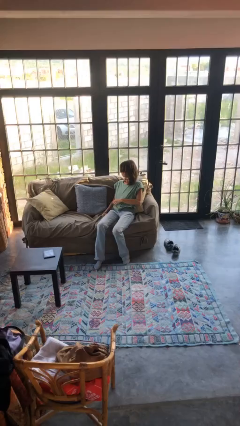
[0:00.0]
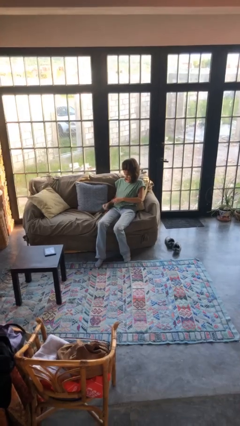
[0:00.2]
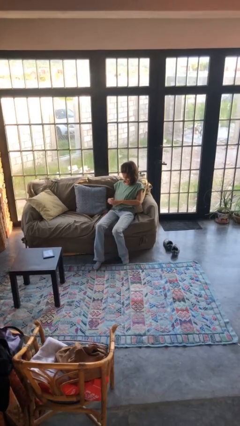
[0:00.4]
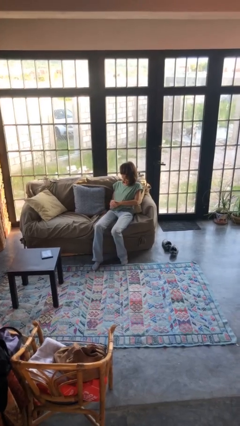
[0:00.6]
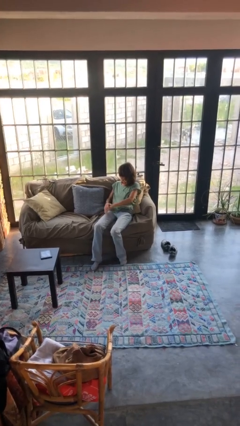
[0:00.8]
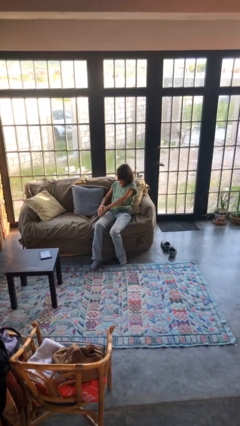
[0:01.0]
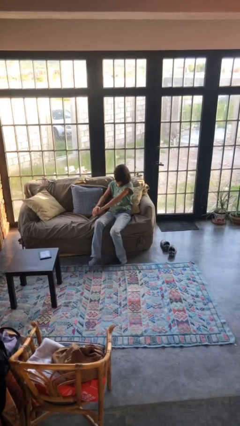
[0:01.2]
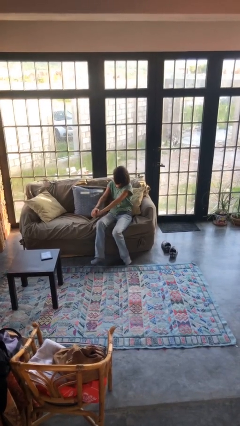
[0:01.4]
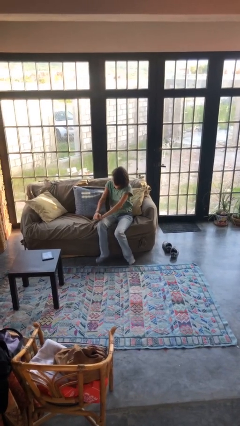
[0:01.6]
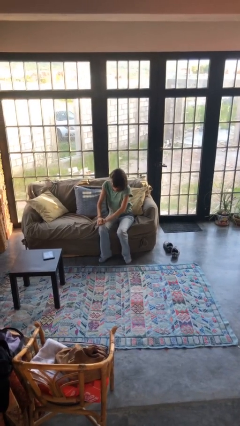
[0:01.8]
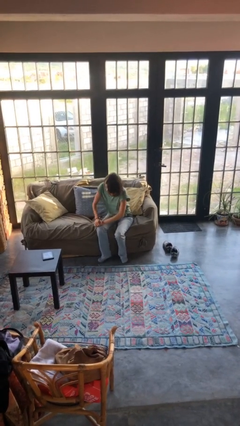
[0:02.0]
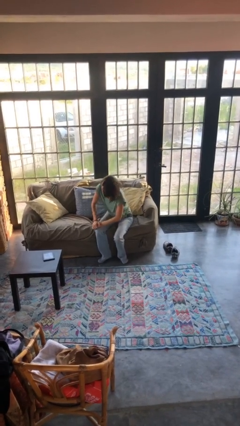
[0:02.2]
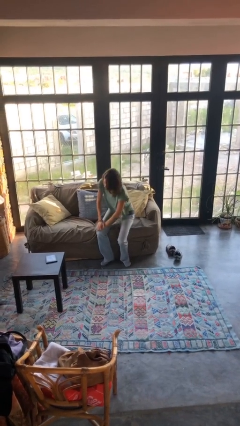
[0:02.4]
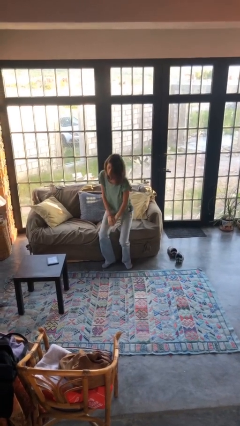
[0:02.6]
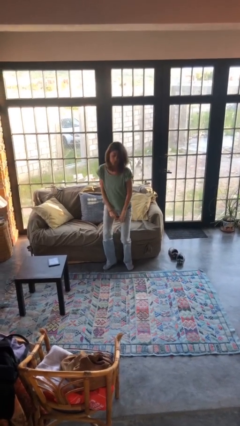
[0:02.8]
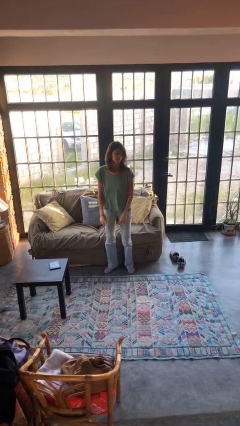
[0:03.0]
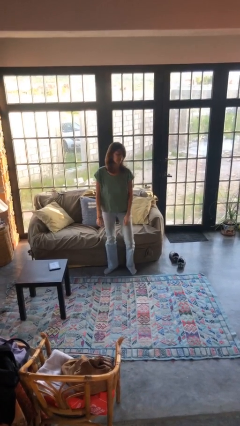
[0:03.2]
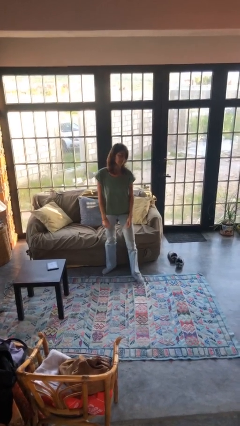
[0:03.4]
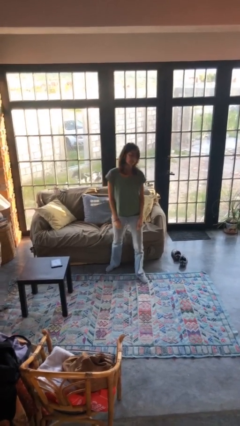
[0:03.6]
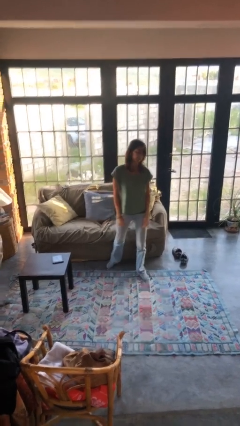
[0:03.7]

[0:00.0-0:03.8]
person stands up

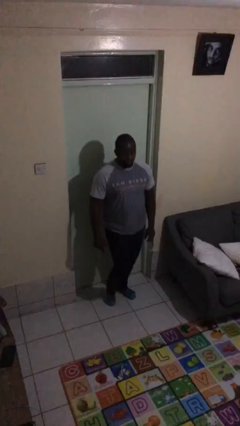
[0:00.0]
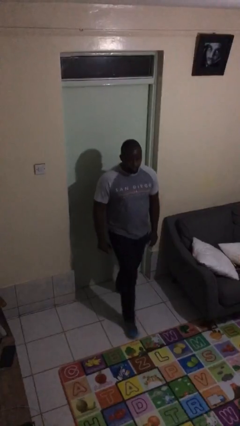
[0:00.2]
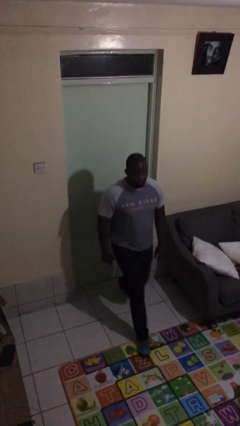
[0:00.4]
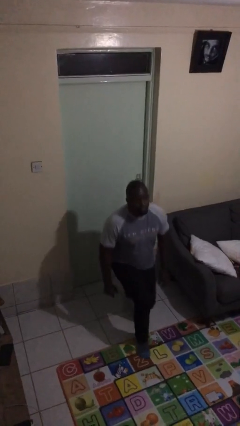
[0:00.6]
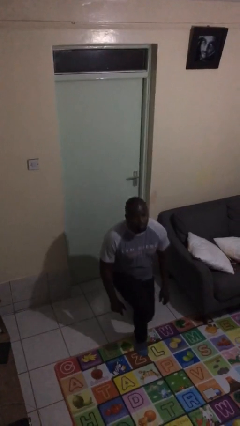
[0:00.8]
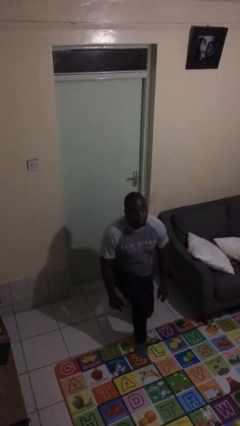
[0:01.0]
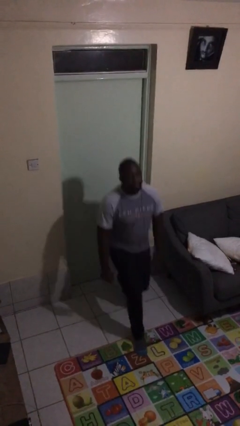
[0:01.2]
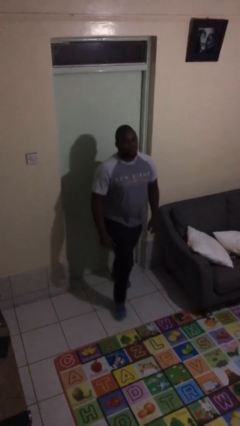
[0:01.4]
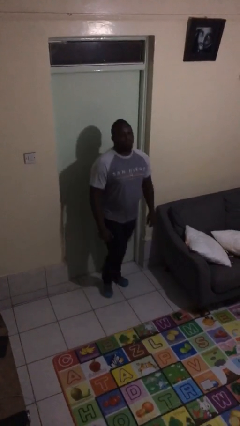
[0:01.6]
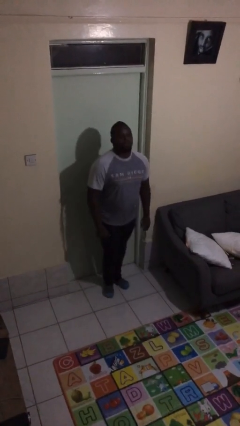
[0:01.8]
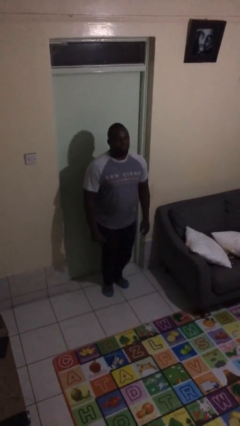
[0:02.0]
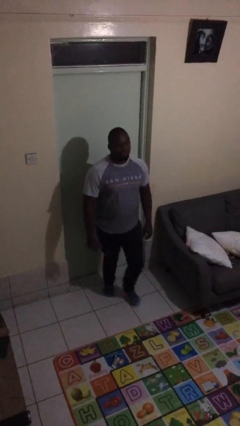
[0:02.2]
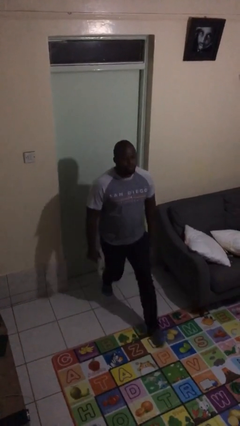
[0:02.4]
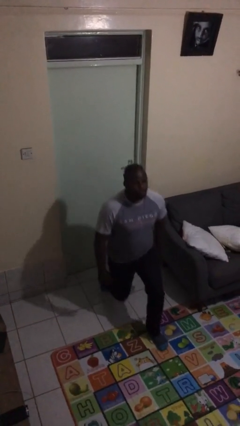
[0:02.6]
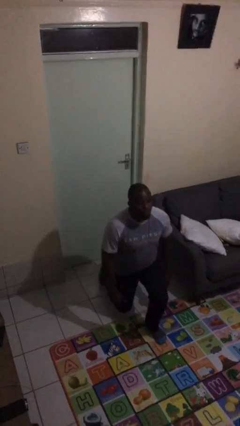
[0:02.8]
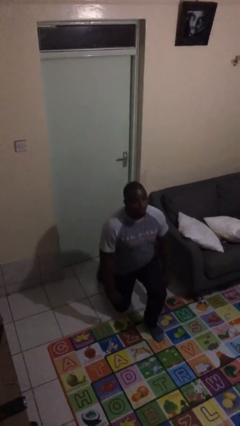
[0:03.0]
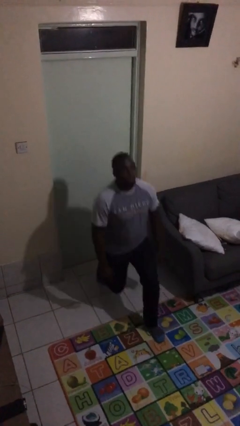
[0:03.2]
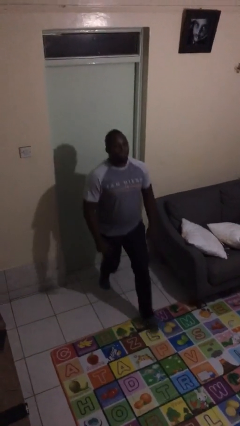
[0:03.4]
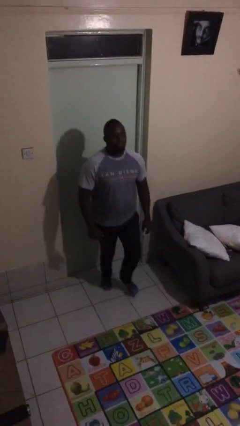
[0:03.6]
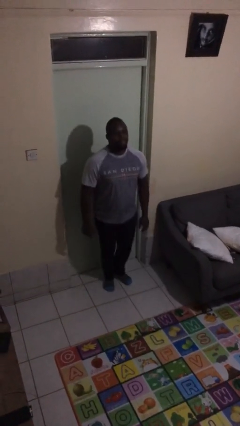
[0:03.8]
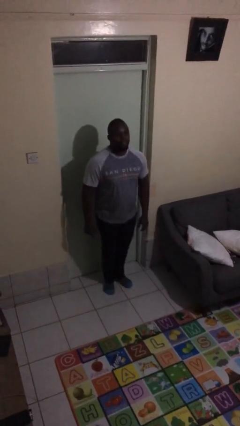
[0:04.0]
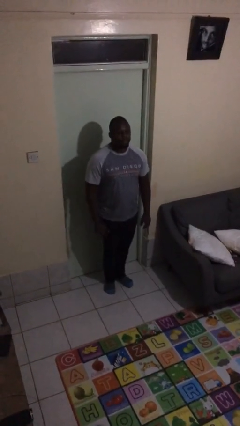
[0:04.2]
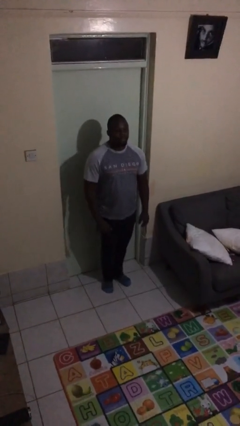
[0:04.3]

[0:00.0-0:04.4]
person exercises with lunges

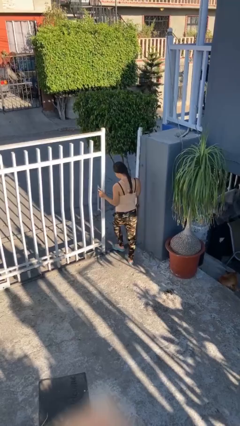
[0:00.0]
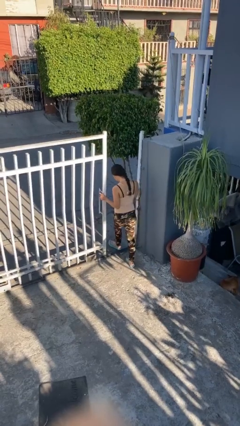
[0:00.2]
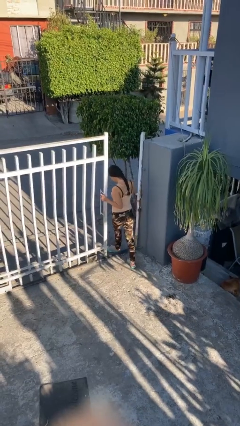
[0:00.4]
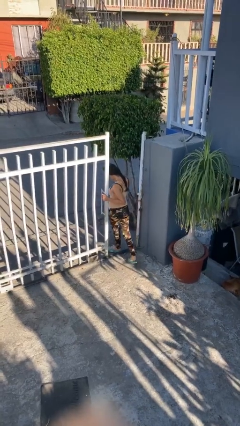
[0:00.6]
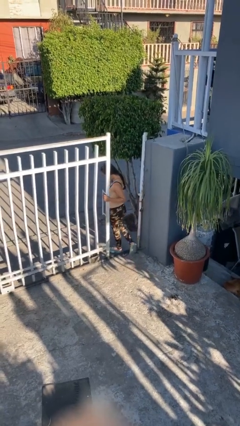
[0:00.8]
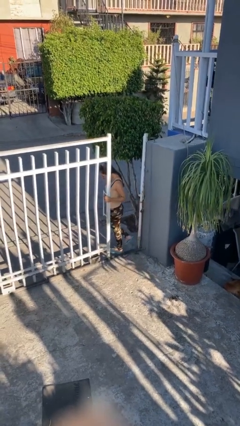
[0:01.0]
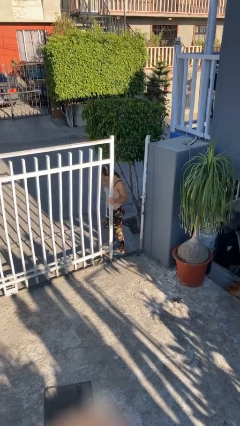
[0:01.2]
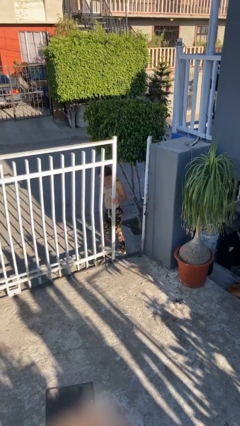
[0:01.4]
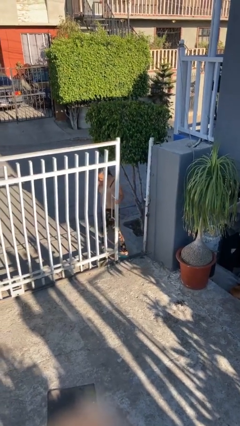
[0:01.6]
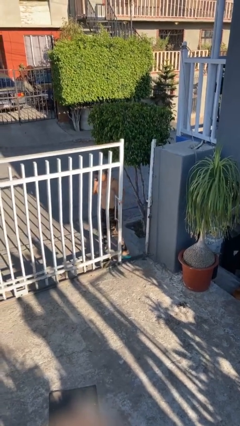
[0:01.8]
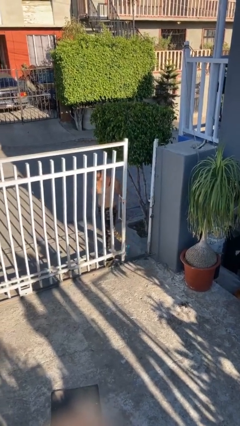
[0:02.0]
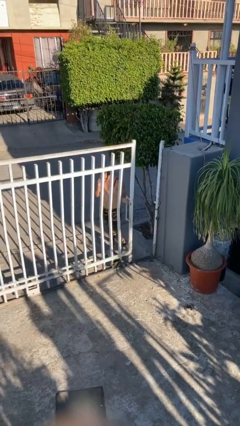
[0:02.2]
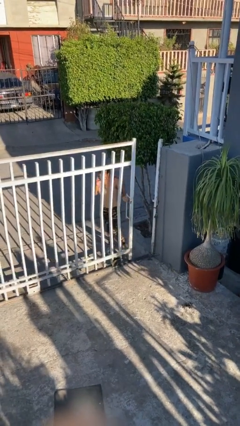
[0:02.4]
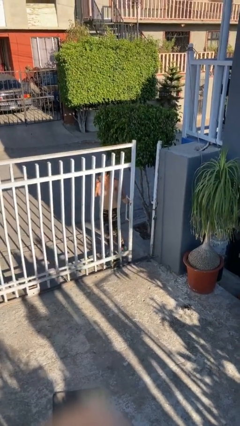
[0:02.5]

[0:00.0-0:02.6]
person exits scene through structure

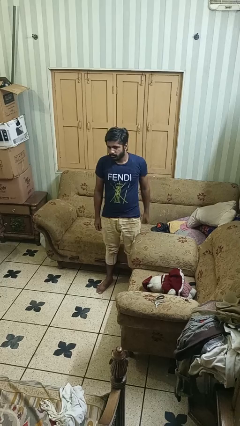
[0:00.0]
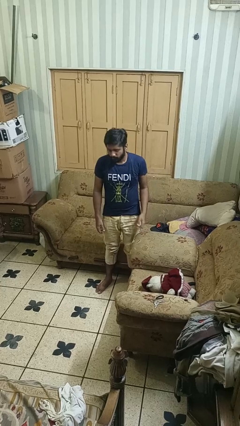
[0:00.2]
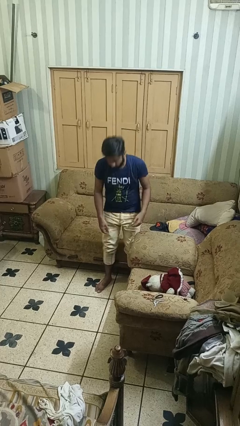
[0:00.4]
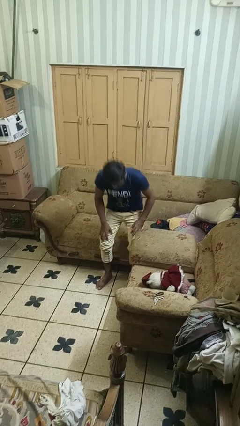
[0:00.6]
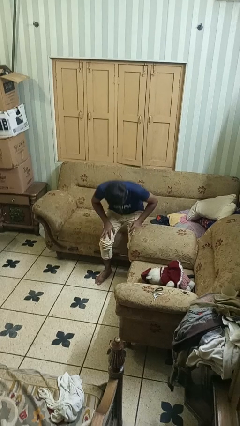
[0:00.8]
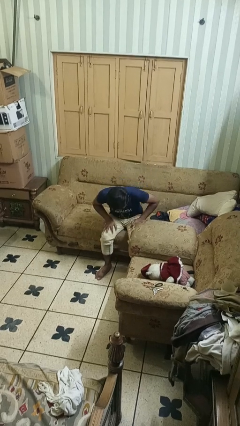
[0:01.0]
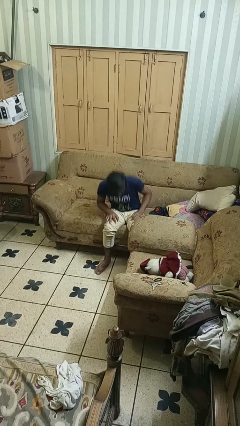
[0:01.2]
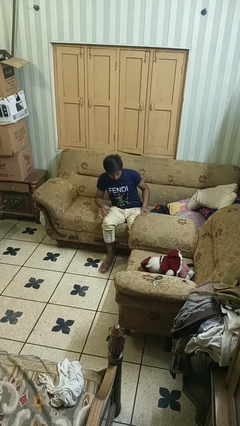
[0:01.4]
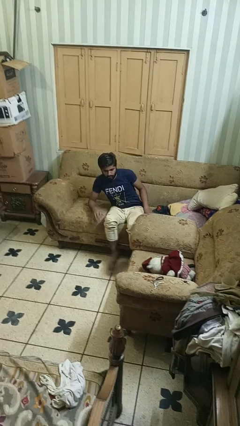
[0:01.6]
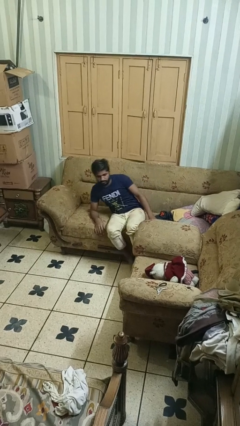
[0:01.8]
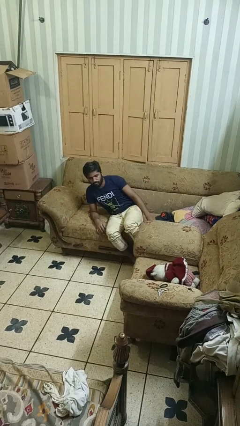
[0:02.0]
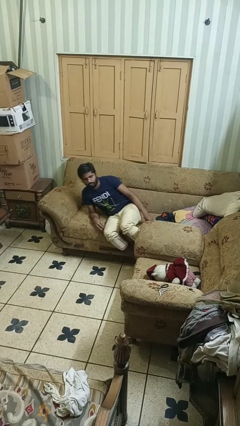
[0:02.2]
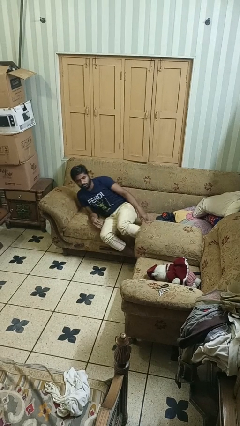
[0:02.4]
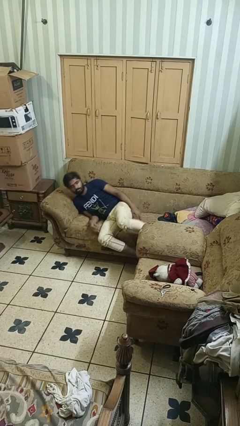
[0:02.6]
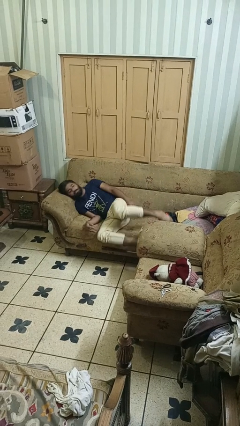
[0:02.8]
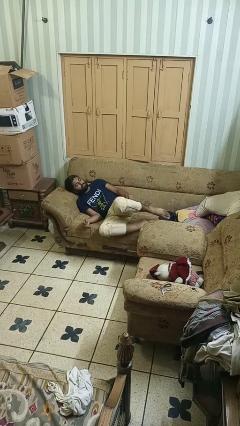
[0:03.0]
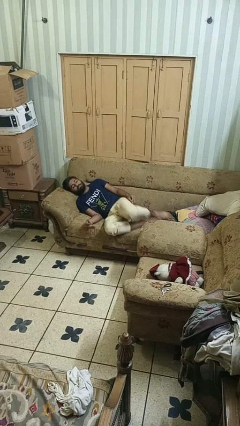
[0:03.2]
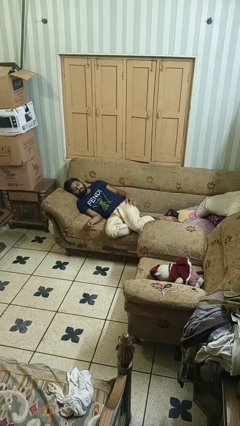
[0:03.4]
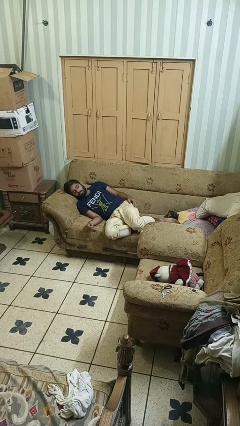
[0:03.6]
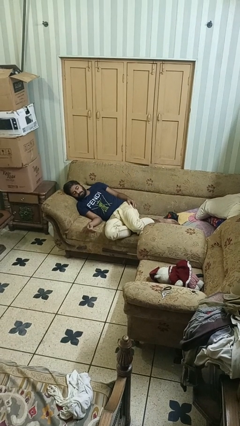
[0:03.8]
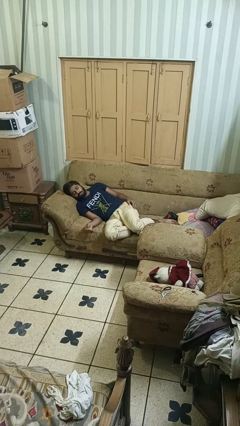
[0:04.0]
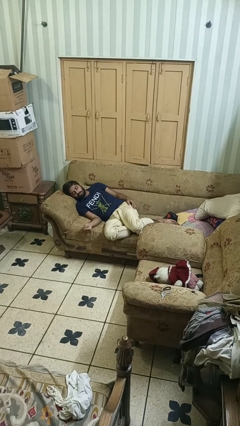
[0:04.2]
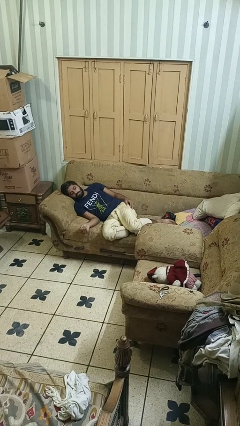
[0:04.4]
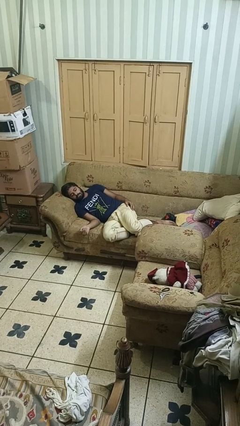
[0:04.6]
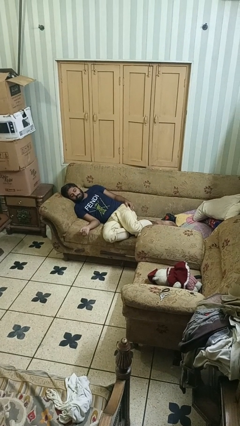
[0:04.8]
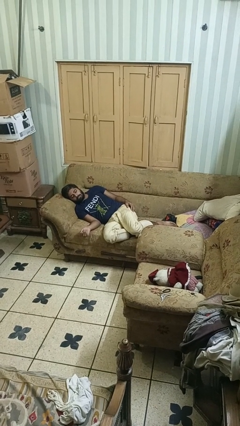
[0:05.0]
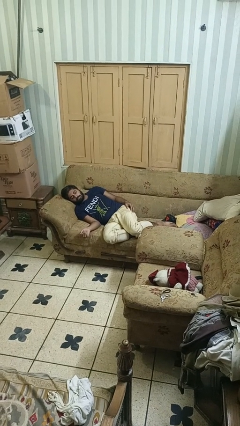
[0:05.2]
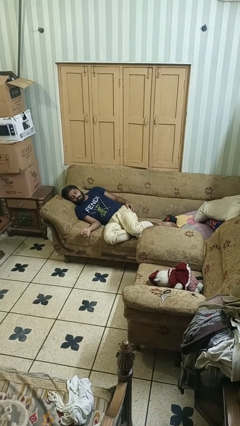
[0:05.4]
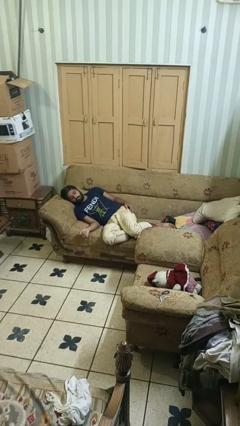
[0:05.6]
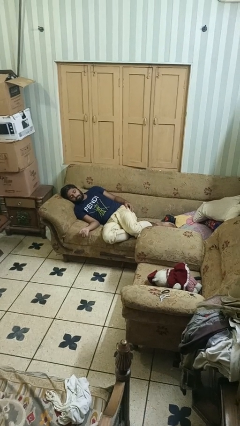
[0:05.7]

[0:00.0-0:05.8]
person lies down on couch

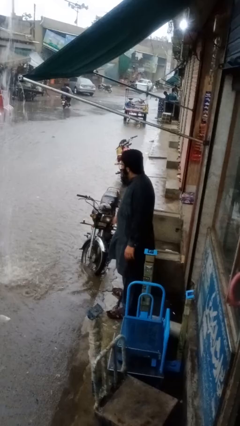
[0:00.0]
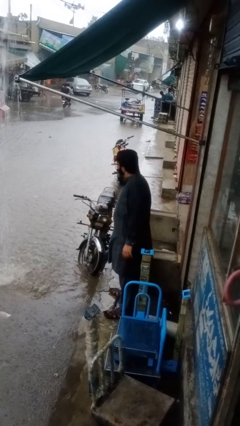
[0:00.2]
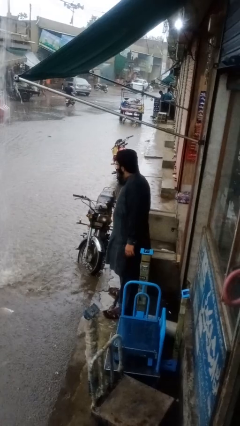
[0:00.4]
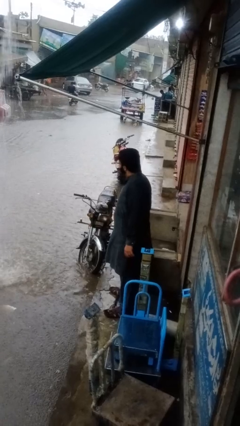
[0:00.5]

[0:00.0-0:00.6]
person points at person

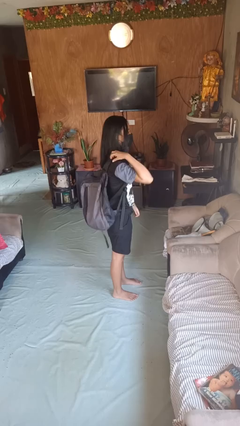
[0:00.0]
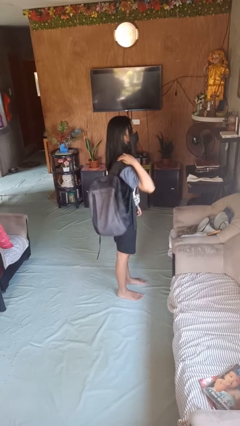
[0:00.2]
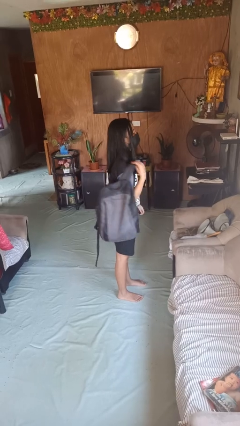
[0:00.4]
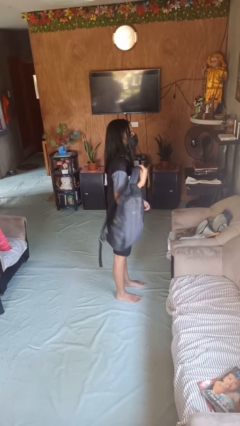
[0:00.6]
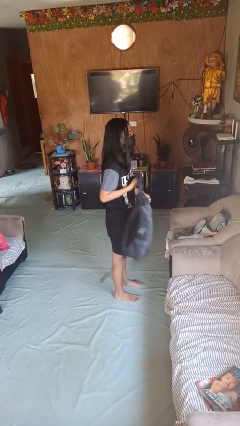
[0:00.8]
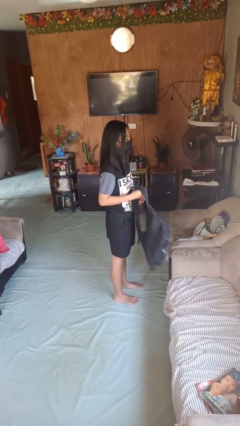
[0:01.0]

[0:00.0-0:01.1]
person takes off backpack
